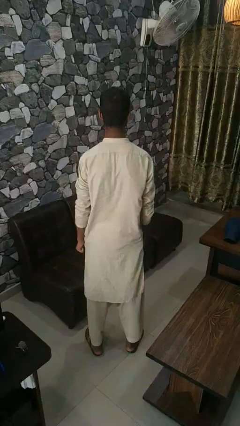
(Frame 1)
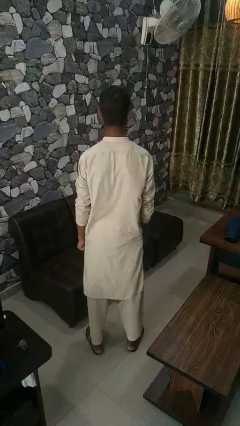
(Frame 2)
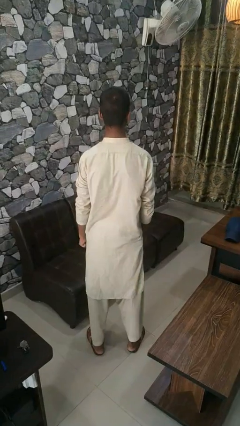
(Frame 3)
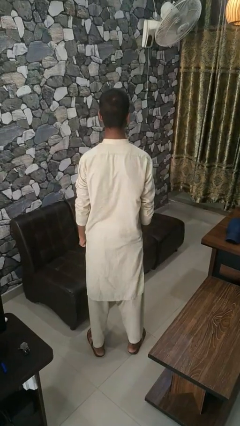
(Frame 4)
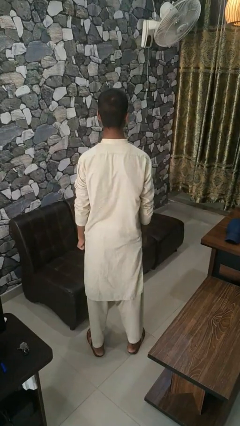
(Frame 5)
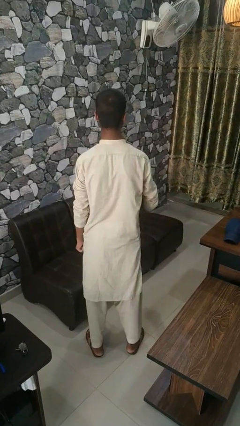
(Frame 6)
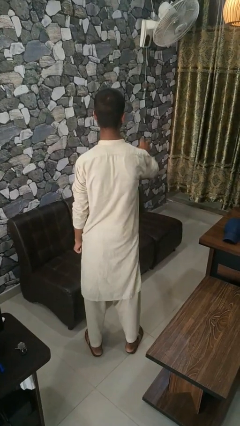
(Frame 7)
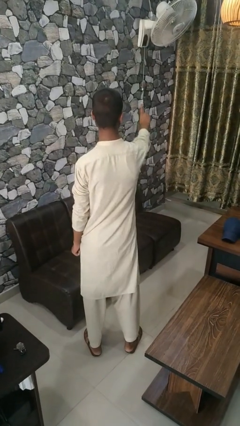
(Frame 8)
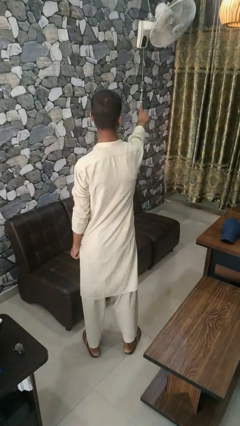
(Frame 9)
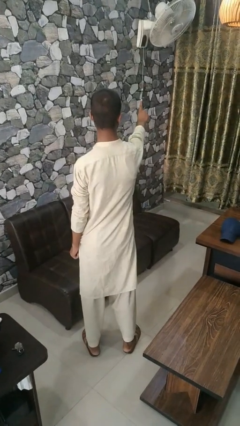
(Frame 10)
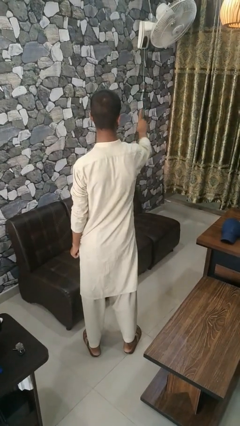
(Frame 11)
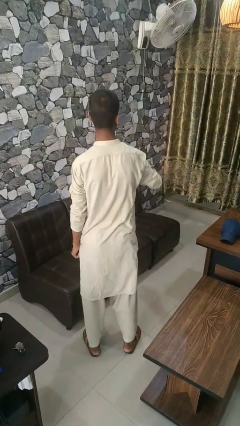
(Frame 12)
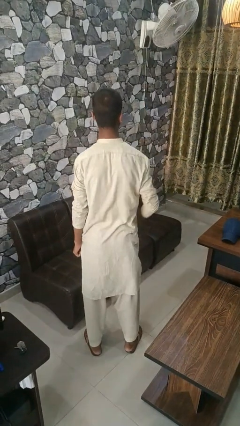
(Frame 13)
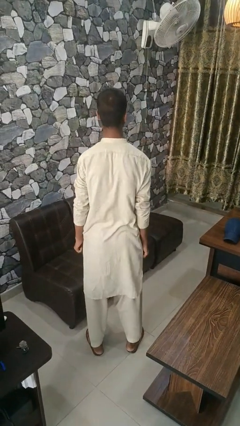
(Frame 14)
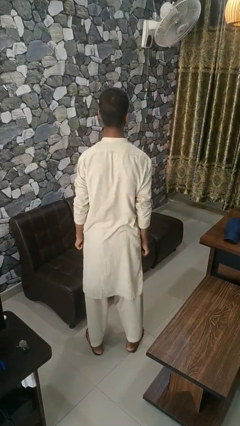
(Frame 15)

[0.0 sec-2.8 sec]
person gestures number one

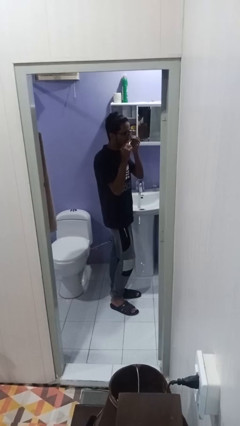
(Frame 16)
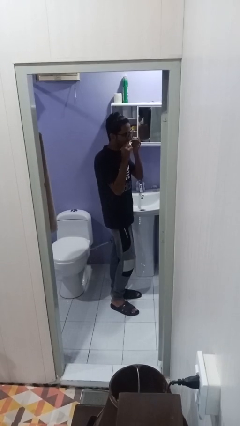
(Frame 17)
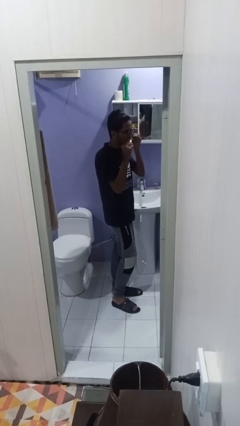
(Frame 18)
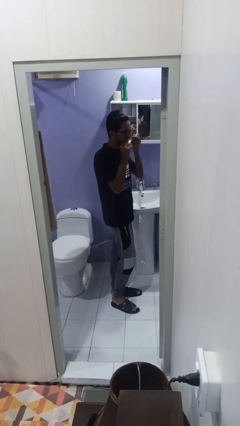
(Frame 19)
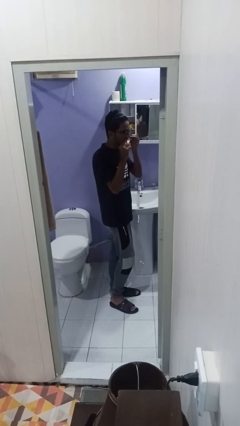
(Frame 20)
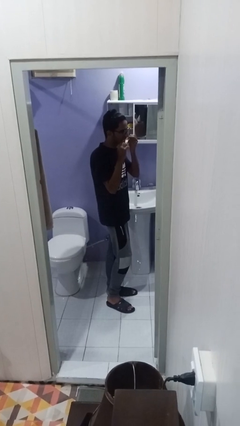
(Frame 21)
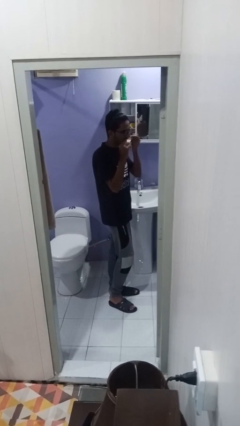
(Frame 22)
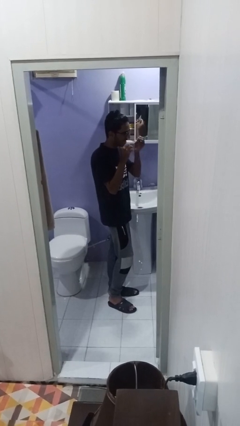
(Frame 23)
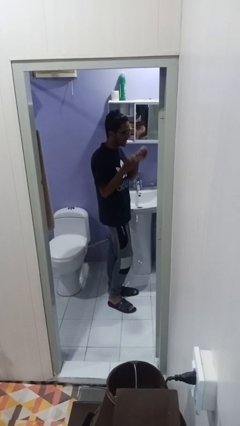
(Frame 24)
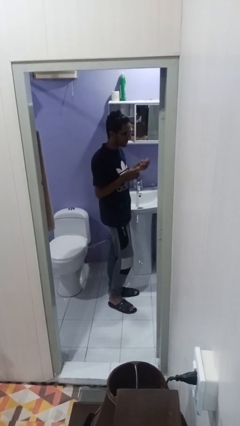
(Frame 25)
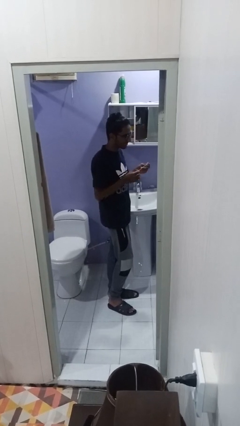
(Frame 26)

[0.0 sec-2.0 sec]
person flosses

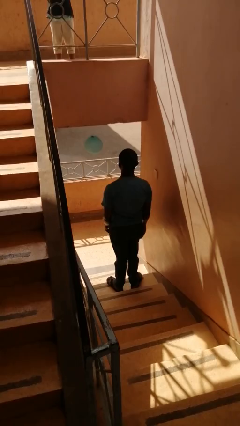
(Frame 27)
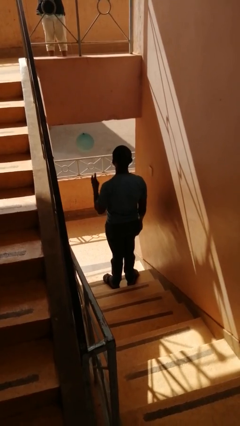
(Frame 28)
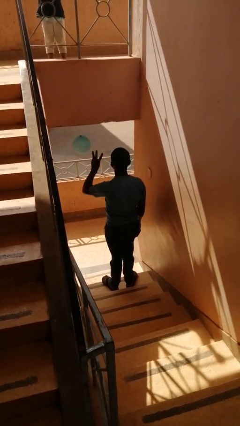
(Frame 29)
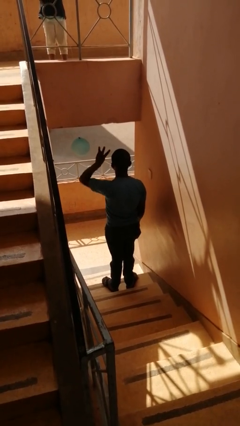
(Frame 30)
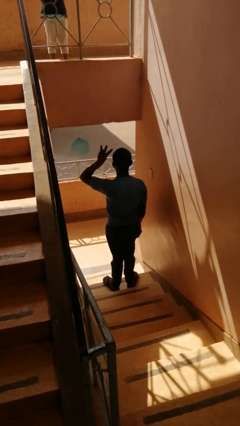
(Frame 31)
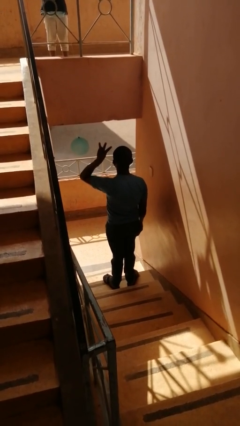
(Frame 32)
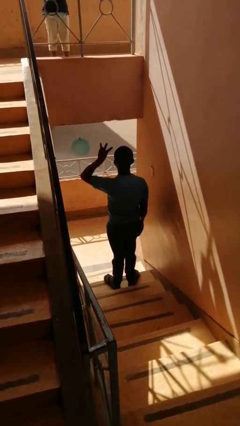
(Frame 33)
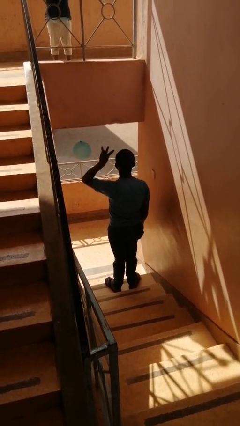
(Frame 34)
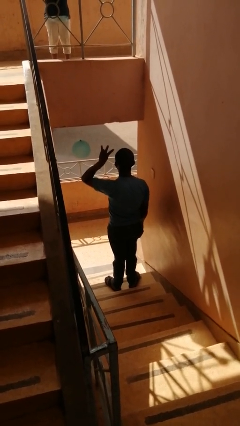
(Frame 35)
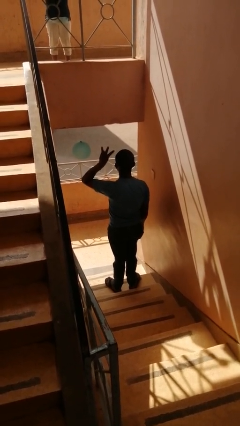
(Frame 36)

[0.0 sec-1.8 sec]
person gestures number three

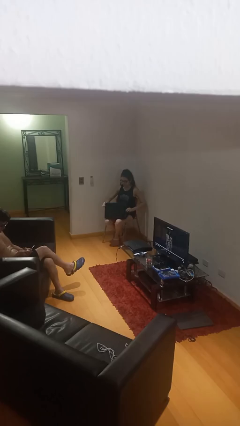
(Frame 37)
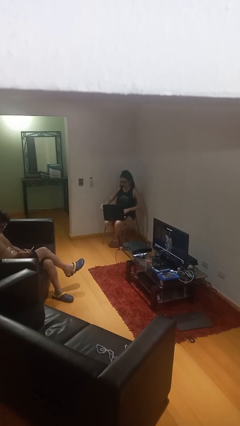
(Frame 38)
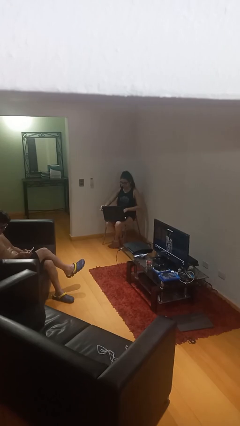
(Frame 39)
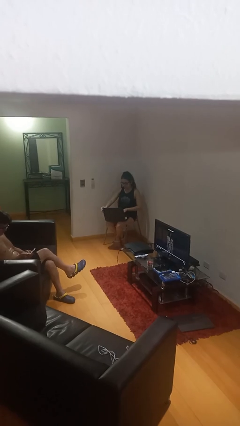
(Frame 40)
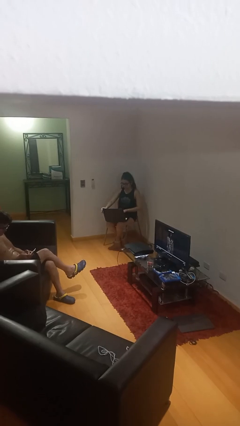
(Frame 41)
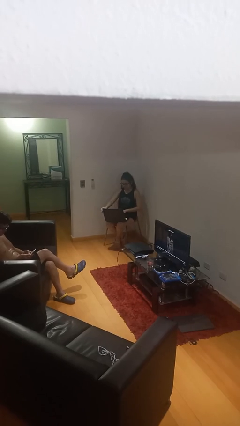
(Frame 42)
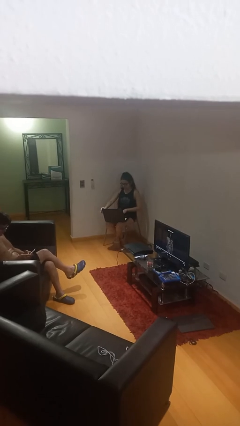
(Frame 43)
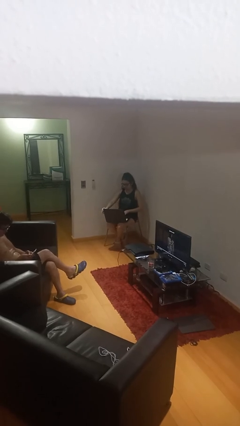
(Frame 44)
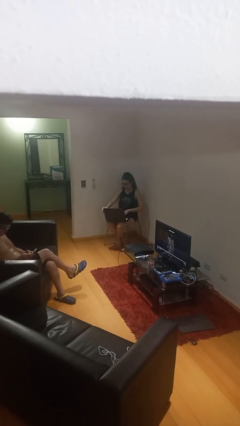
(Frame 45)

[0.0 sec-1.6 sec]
person interacts with laptop

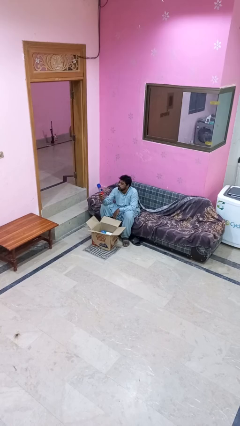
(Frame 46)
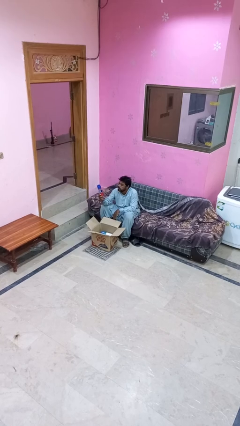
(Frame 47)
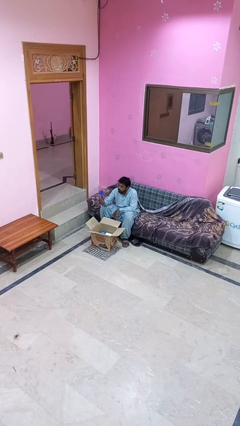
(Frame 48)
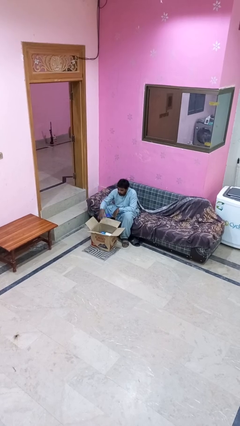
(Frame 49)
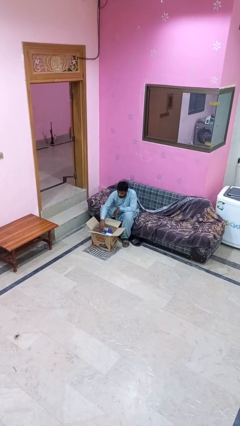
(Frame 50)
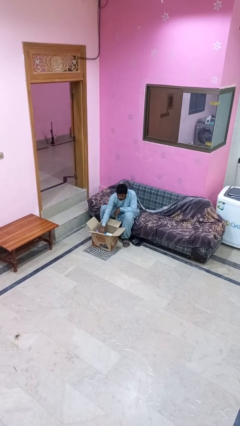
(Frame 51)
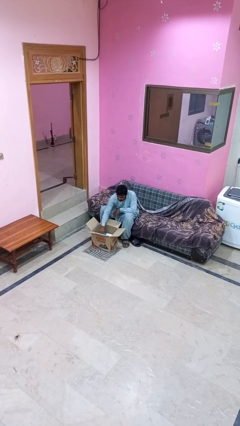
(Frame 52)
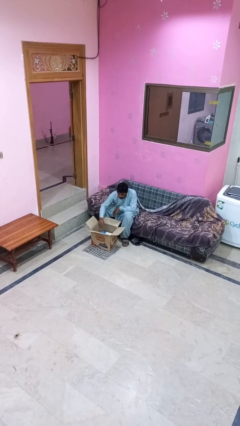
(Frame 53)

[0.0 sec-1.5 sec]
person puts object into box

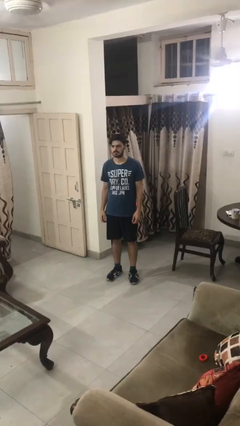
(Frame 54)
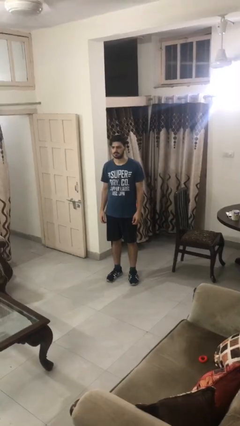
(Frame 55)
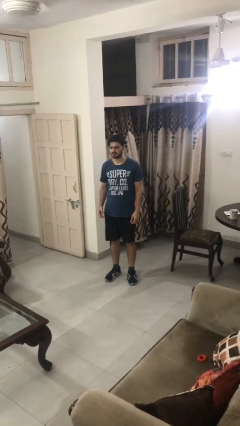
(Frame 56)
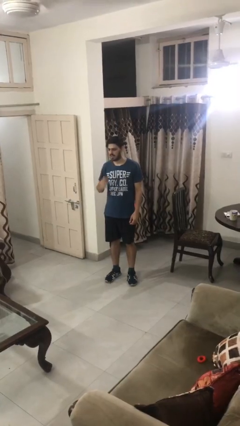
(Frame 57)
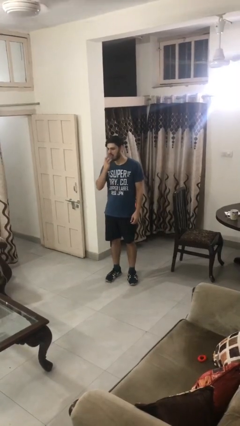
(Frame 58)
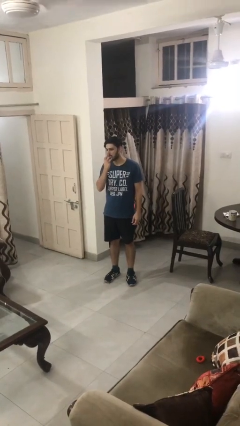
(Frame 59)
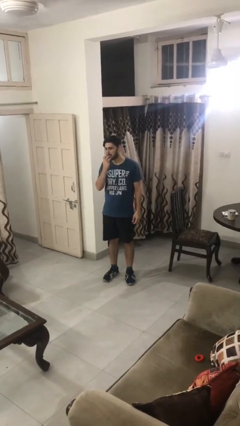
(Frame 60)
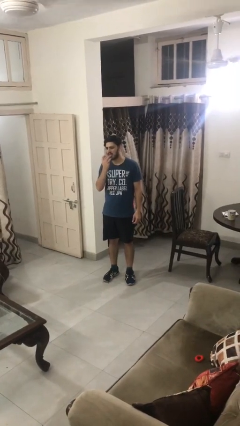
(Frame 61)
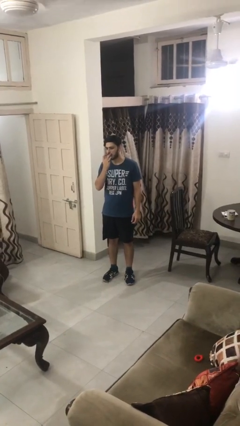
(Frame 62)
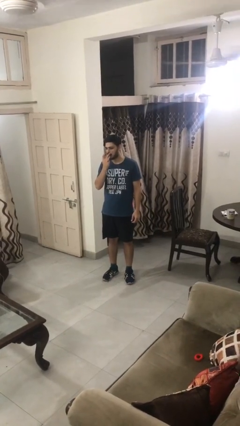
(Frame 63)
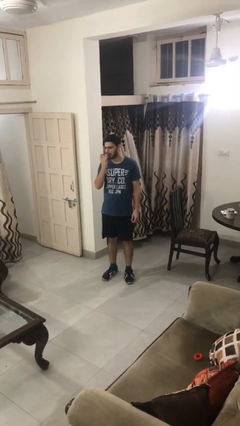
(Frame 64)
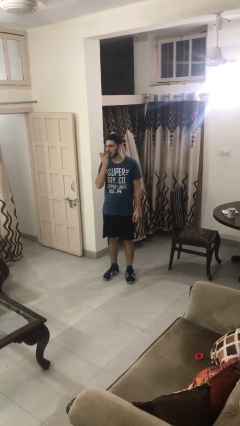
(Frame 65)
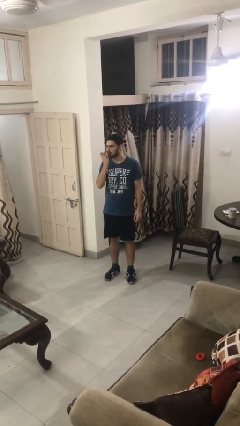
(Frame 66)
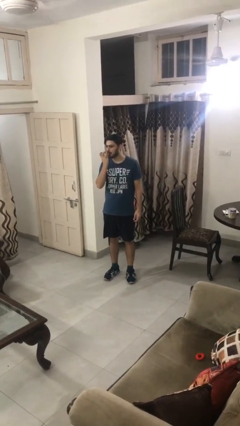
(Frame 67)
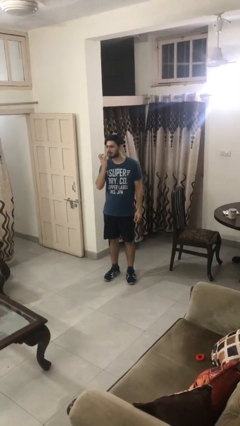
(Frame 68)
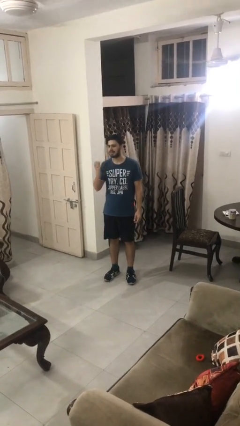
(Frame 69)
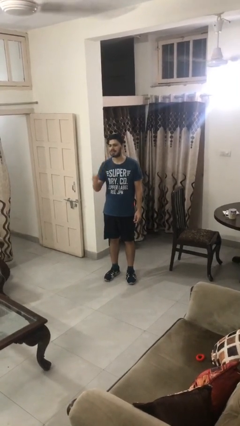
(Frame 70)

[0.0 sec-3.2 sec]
person licks fingers

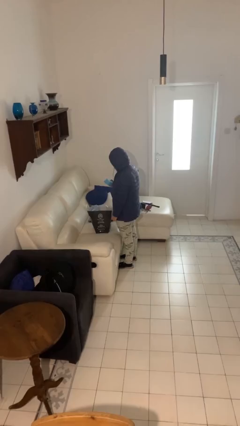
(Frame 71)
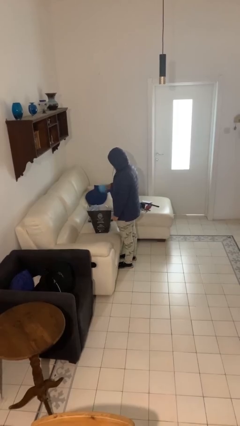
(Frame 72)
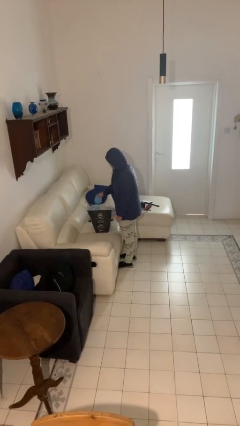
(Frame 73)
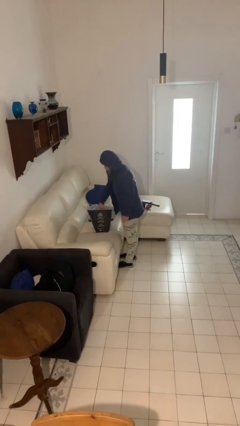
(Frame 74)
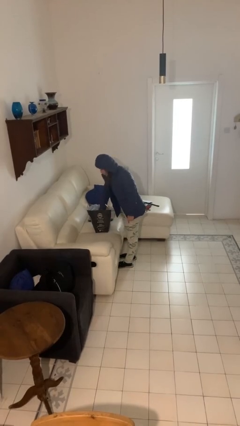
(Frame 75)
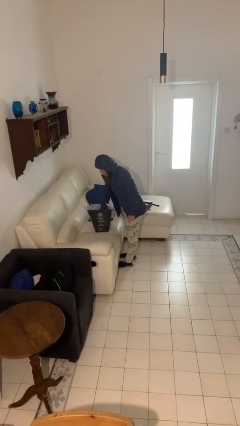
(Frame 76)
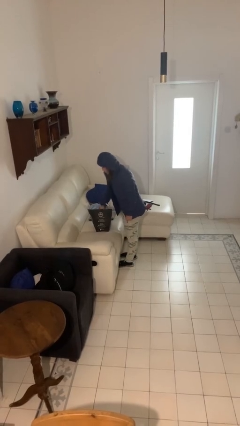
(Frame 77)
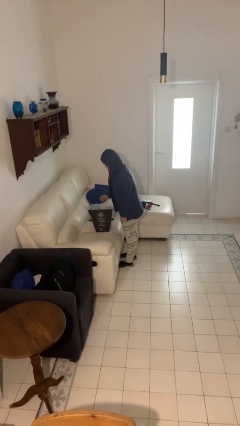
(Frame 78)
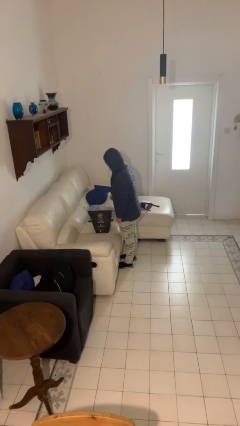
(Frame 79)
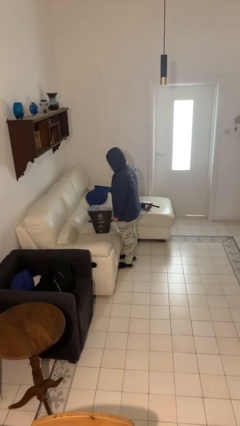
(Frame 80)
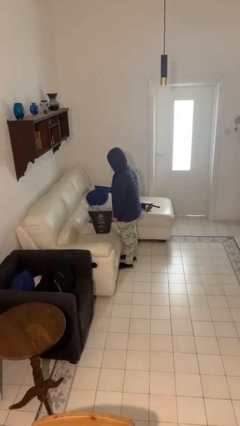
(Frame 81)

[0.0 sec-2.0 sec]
person puts object into bag

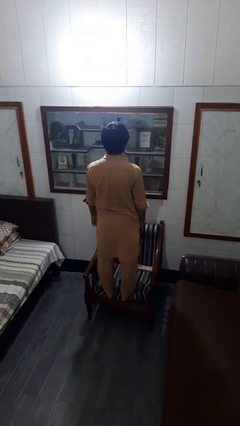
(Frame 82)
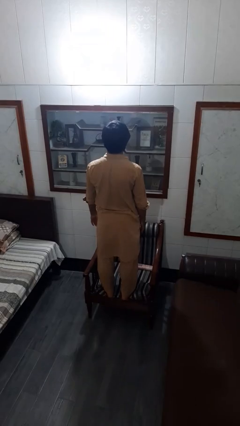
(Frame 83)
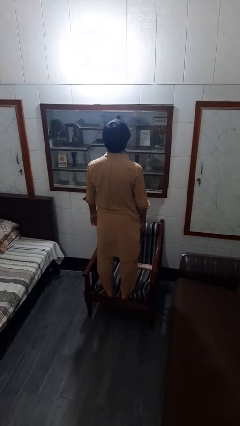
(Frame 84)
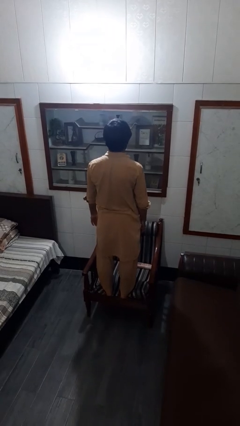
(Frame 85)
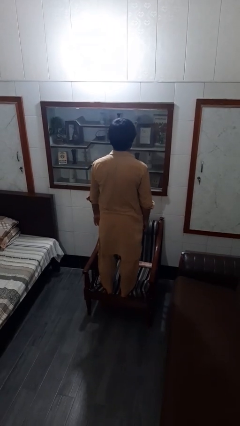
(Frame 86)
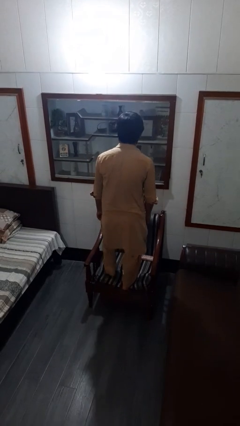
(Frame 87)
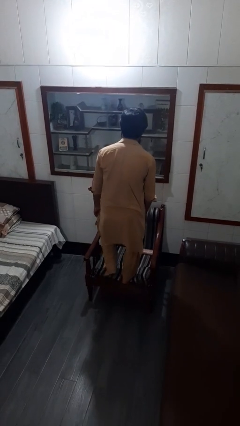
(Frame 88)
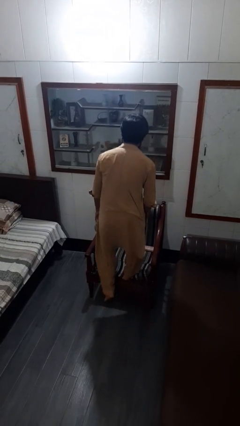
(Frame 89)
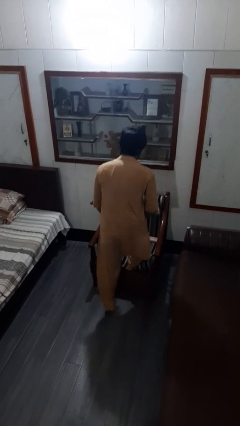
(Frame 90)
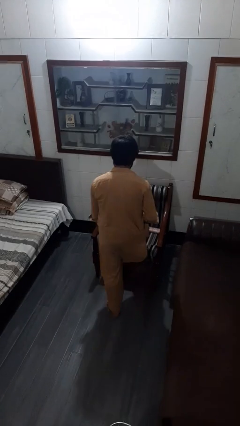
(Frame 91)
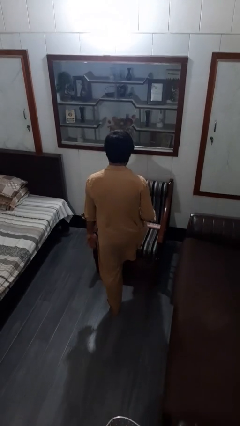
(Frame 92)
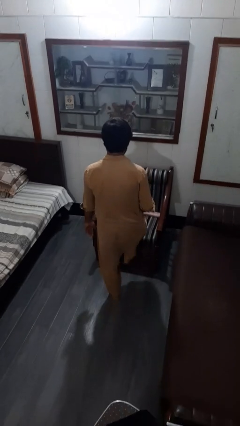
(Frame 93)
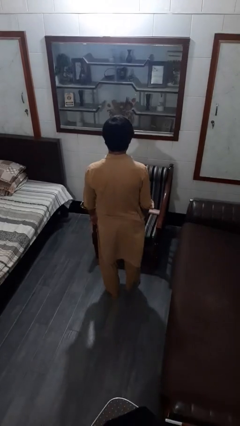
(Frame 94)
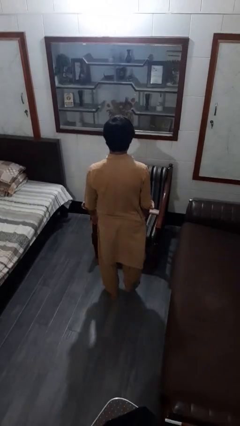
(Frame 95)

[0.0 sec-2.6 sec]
person climbs off chair
